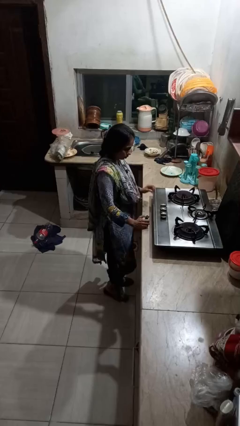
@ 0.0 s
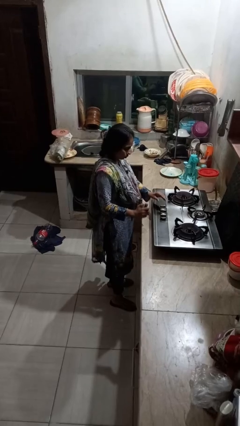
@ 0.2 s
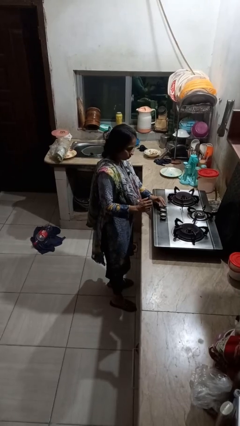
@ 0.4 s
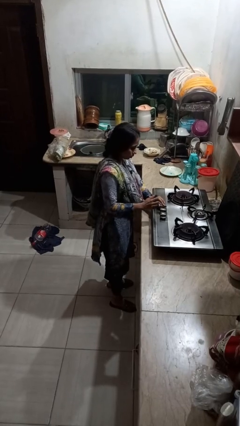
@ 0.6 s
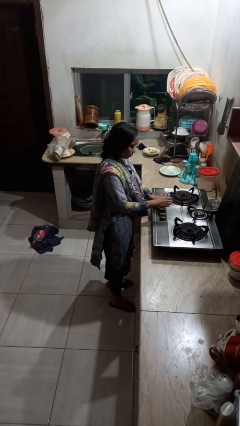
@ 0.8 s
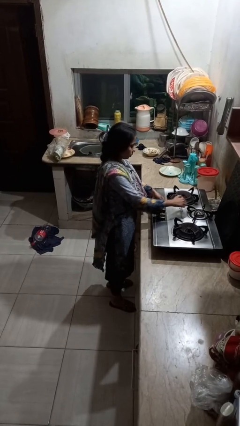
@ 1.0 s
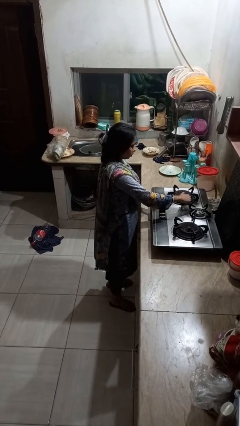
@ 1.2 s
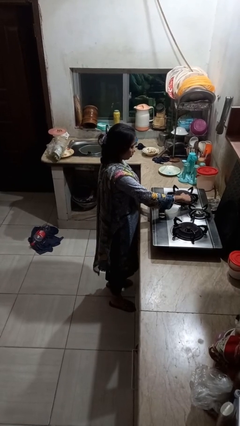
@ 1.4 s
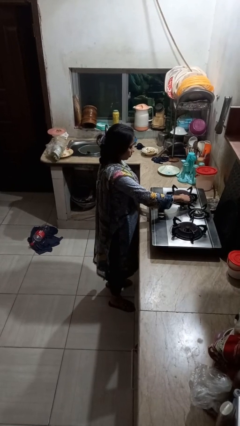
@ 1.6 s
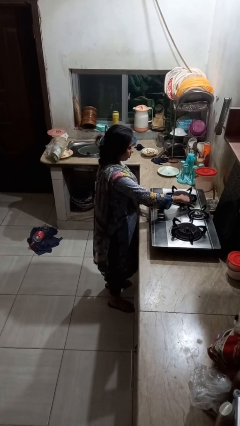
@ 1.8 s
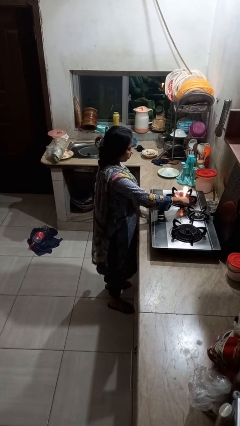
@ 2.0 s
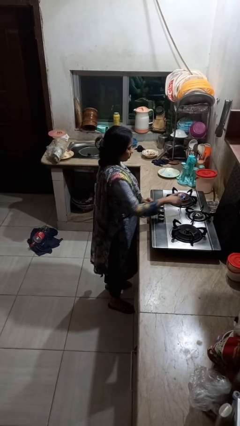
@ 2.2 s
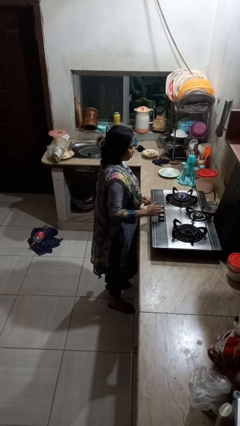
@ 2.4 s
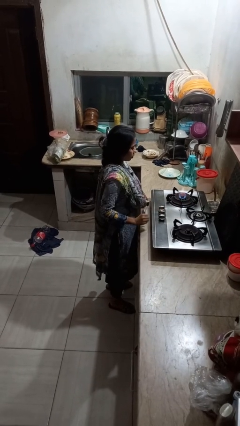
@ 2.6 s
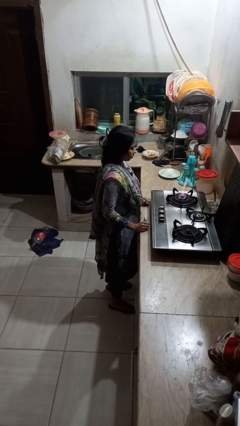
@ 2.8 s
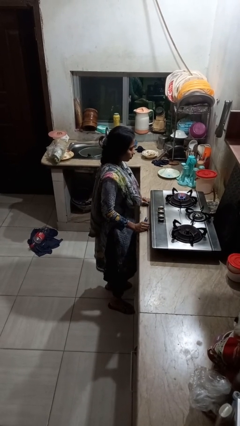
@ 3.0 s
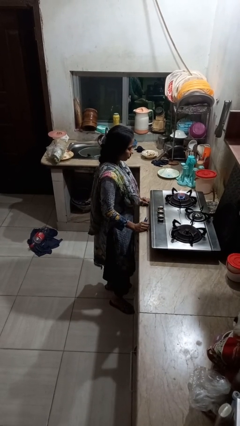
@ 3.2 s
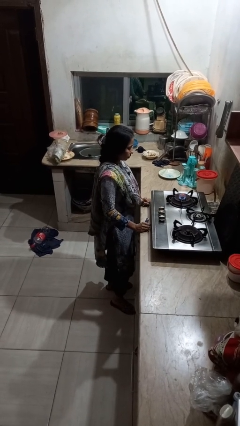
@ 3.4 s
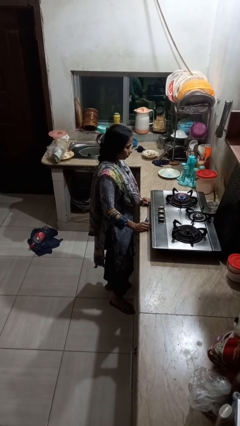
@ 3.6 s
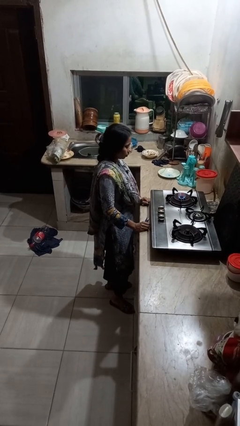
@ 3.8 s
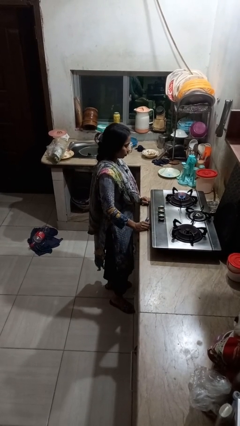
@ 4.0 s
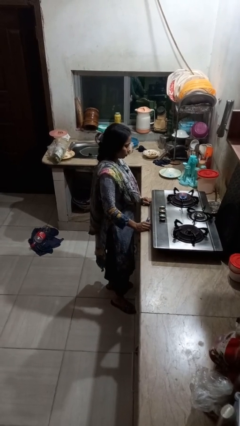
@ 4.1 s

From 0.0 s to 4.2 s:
person turns on stovetop

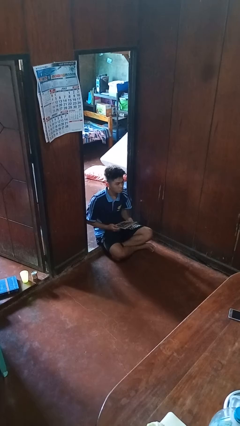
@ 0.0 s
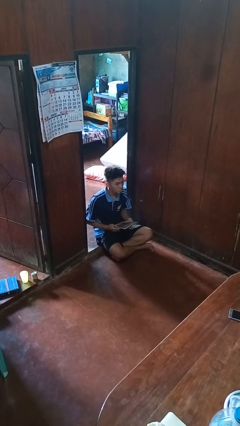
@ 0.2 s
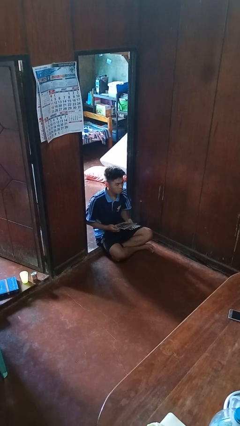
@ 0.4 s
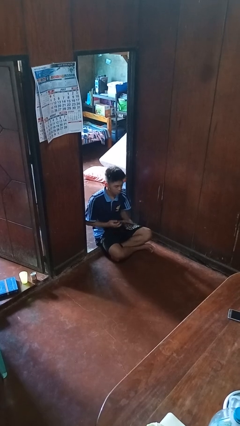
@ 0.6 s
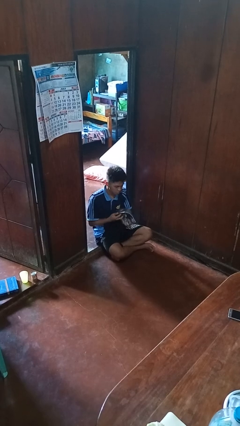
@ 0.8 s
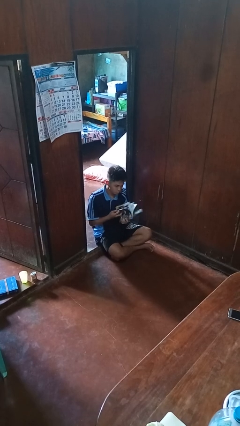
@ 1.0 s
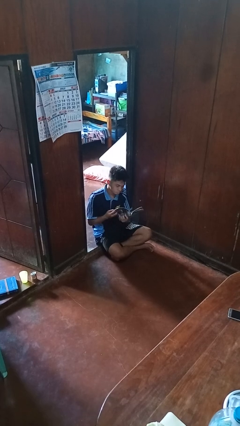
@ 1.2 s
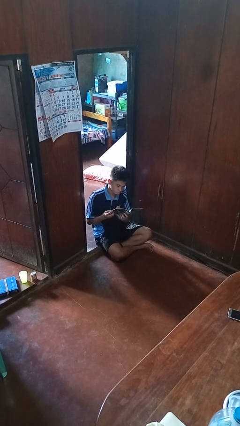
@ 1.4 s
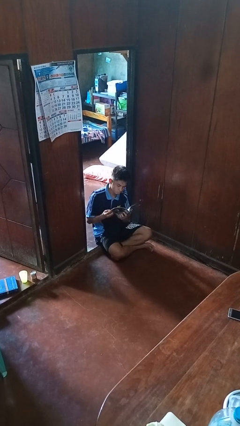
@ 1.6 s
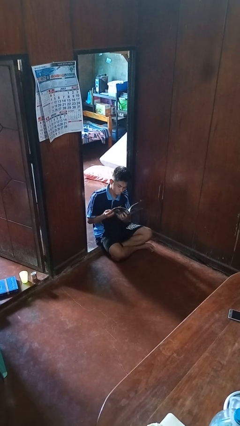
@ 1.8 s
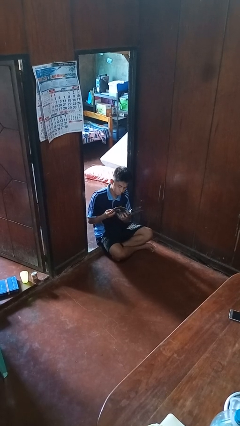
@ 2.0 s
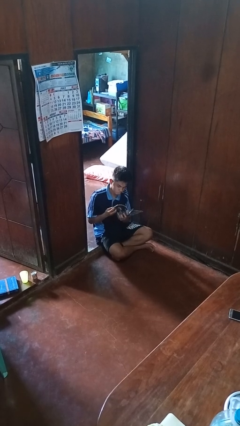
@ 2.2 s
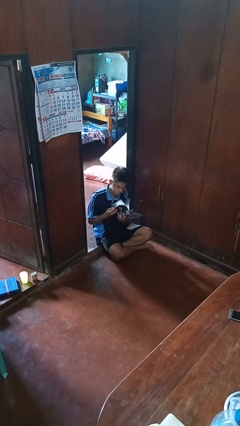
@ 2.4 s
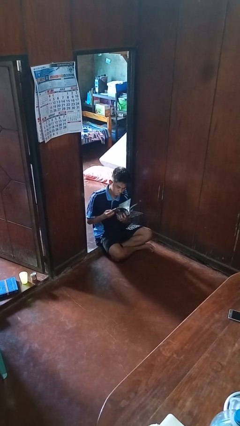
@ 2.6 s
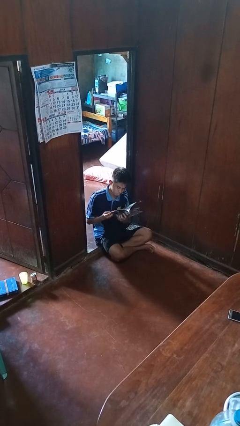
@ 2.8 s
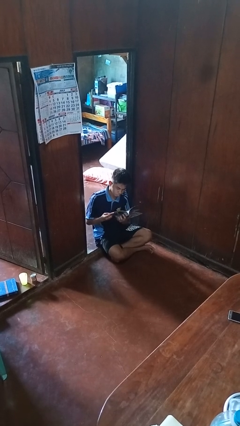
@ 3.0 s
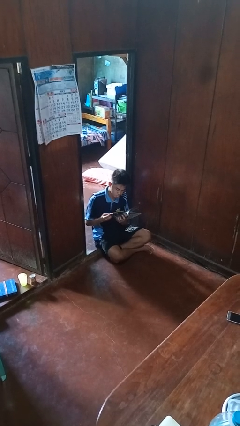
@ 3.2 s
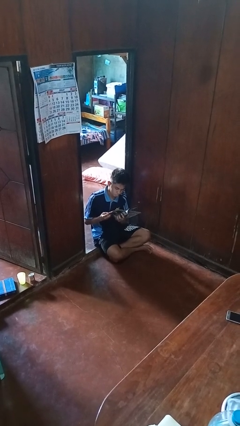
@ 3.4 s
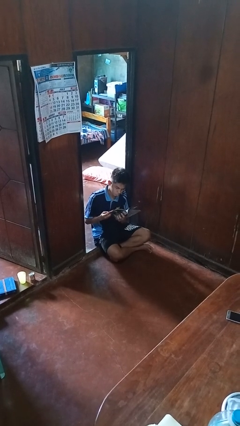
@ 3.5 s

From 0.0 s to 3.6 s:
person reads magazine

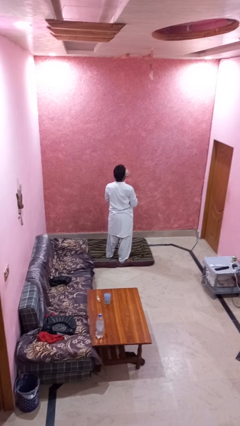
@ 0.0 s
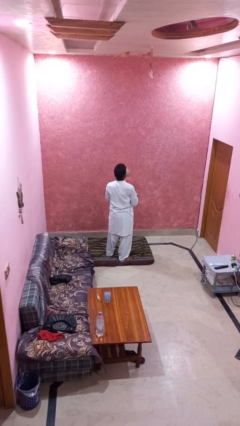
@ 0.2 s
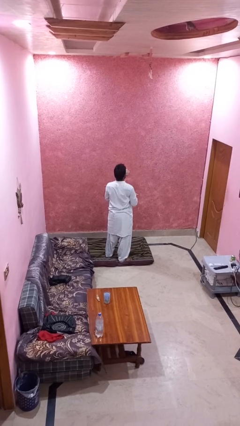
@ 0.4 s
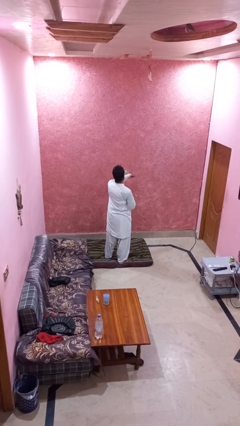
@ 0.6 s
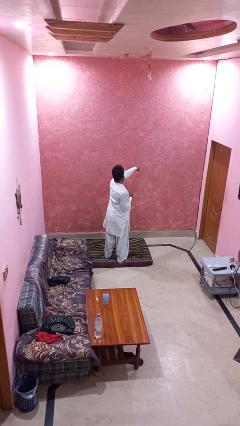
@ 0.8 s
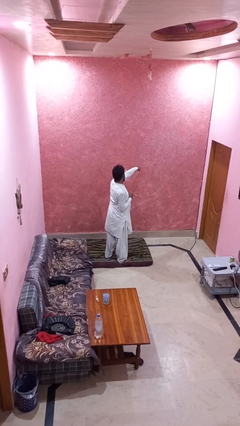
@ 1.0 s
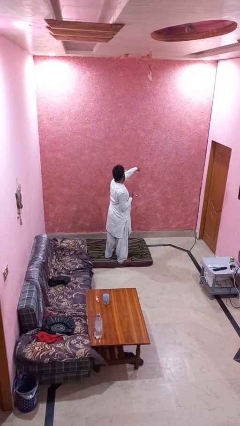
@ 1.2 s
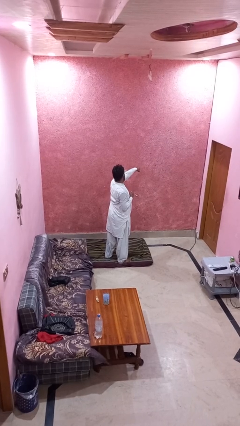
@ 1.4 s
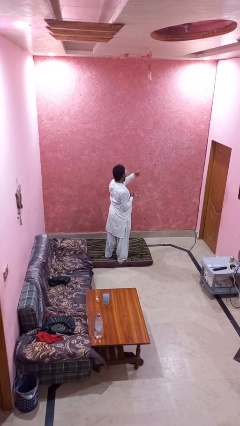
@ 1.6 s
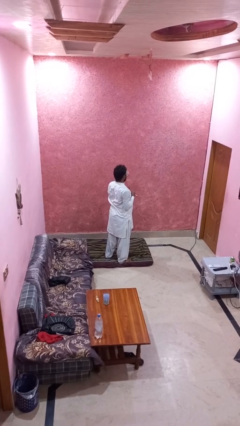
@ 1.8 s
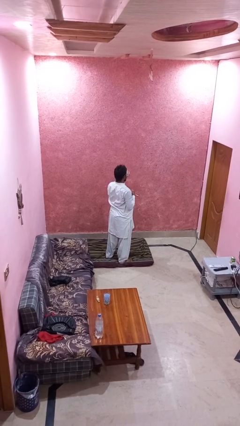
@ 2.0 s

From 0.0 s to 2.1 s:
person punches

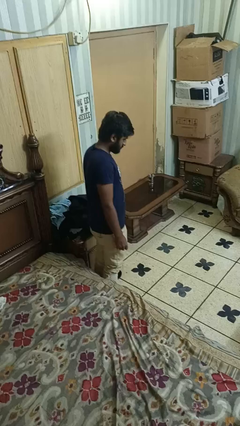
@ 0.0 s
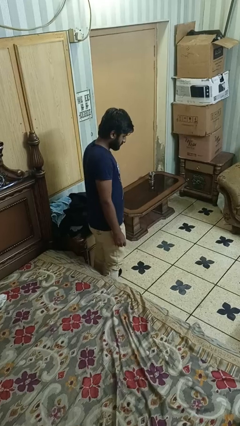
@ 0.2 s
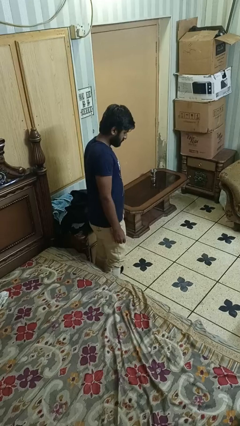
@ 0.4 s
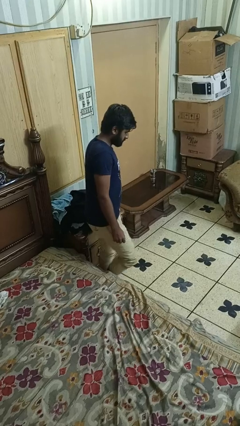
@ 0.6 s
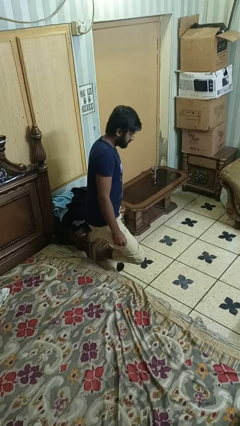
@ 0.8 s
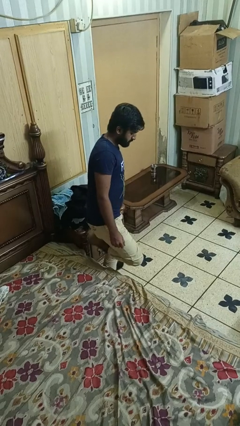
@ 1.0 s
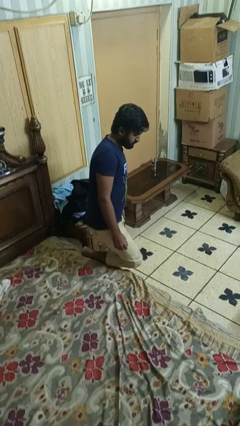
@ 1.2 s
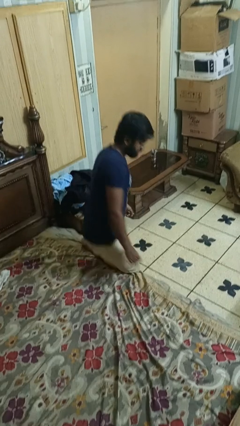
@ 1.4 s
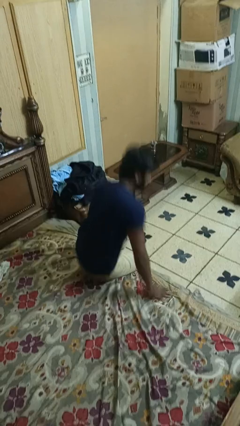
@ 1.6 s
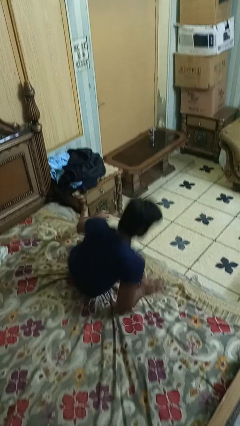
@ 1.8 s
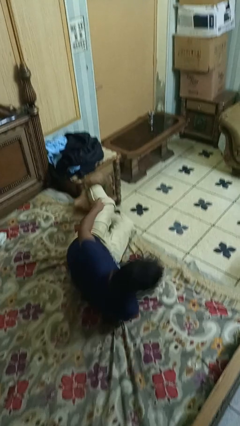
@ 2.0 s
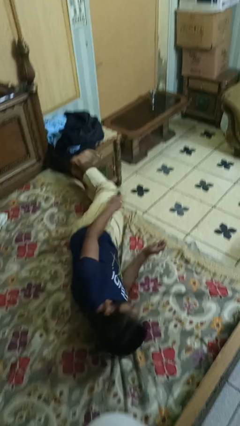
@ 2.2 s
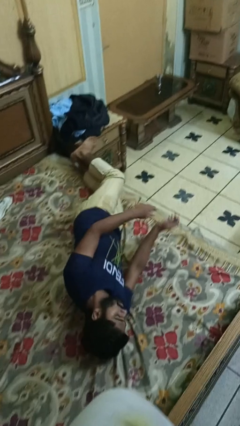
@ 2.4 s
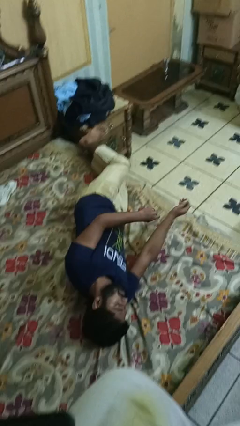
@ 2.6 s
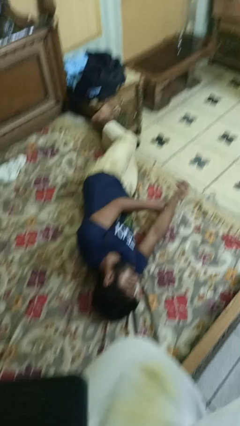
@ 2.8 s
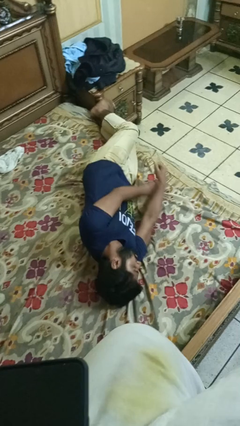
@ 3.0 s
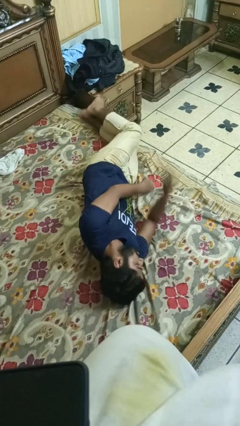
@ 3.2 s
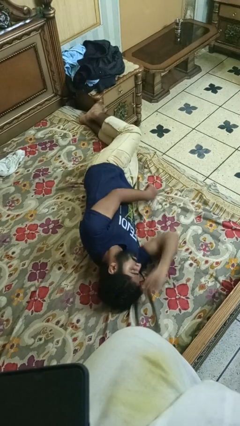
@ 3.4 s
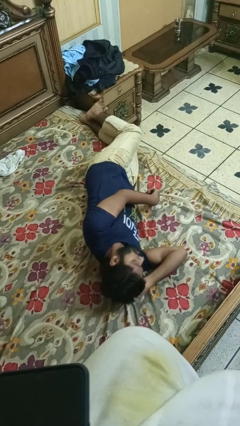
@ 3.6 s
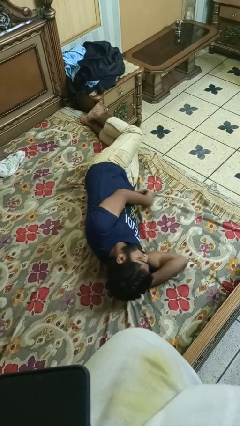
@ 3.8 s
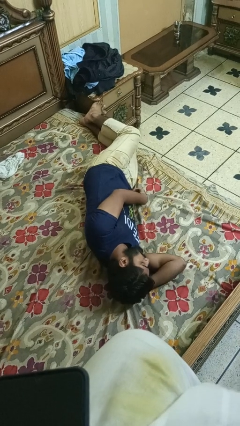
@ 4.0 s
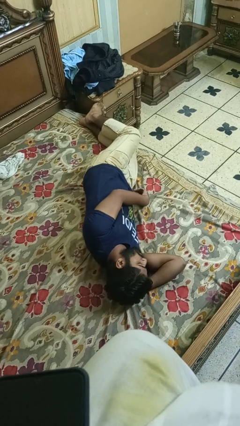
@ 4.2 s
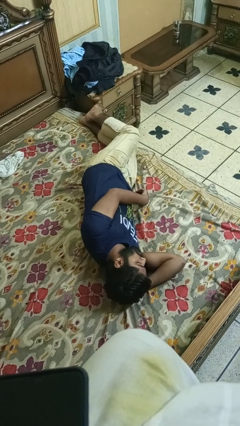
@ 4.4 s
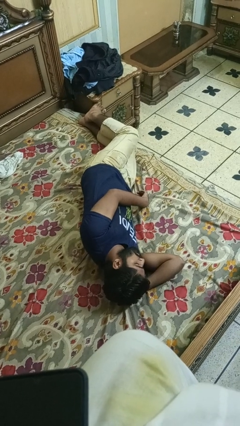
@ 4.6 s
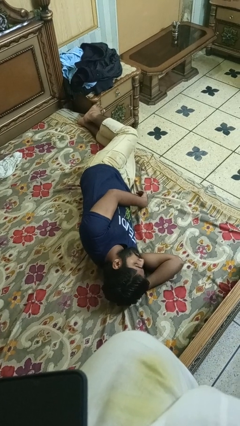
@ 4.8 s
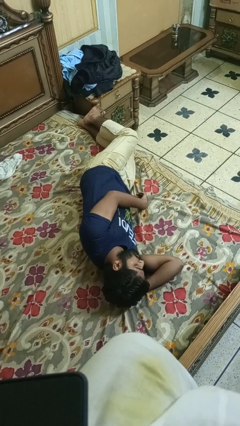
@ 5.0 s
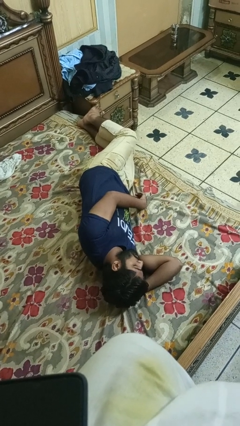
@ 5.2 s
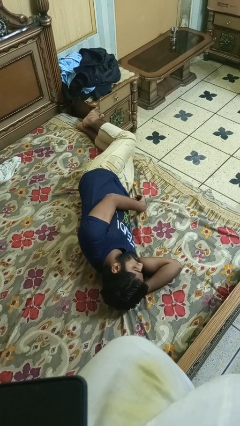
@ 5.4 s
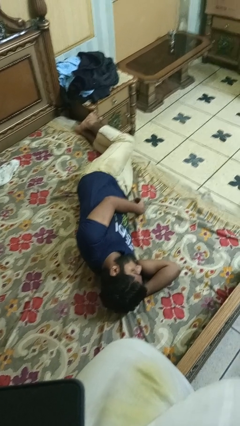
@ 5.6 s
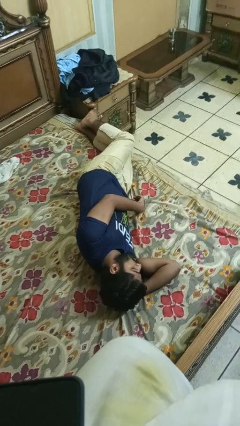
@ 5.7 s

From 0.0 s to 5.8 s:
person lies down on bed

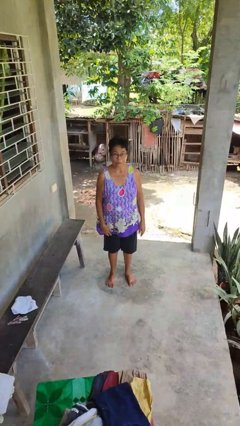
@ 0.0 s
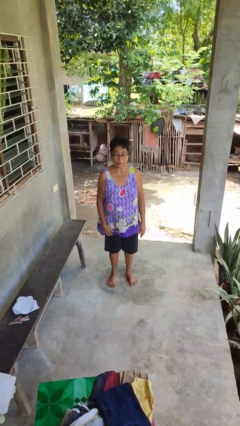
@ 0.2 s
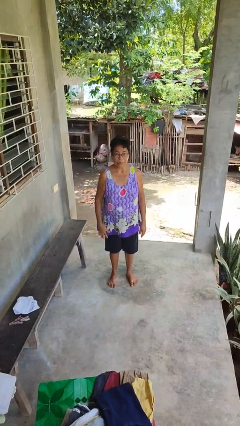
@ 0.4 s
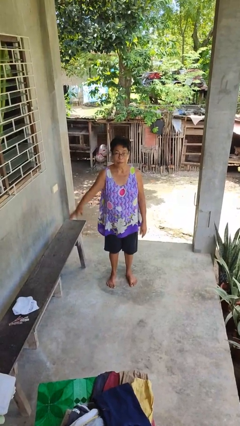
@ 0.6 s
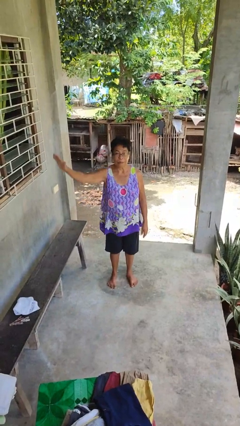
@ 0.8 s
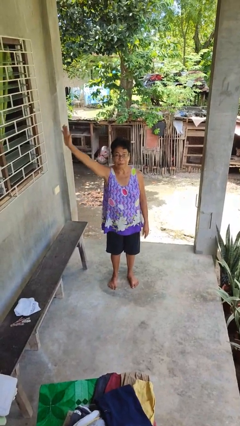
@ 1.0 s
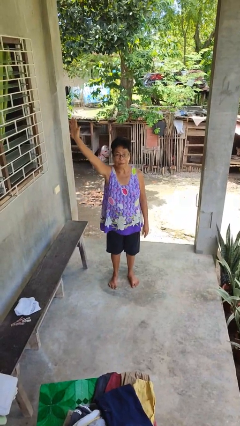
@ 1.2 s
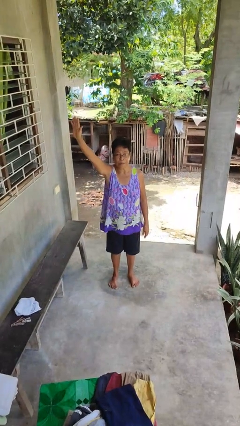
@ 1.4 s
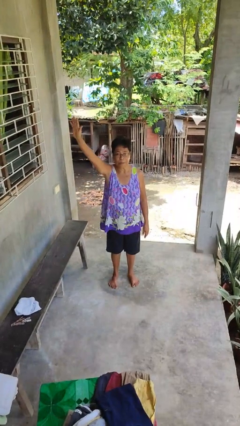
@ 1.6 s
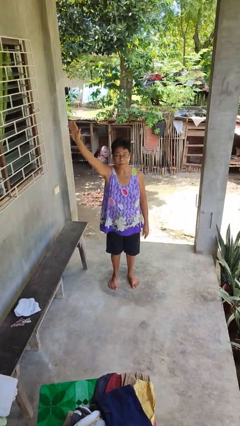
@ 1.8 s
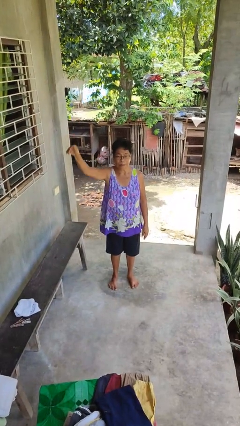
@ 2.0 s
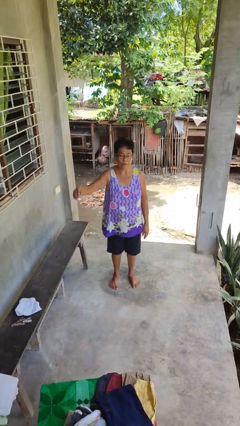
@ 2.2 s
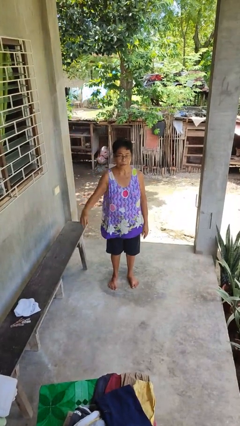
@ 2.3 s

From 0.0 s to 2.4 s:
person gestures stop
